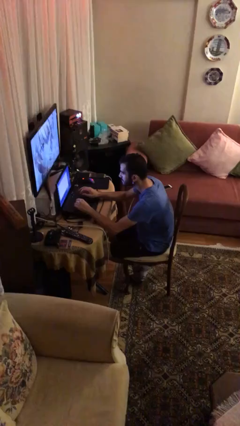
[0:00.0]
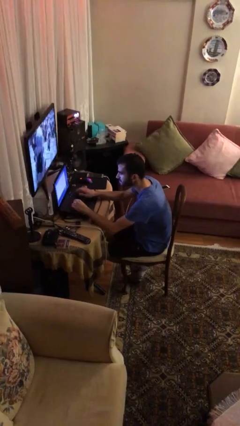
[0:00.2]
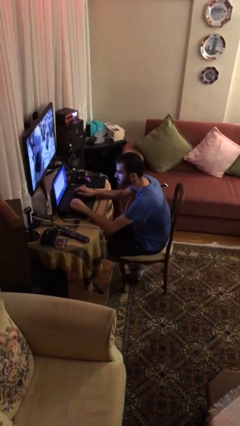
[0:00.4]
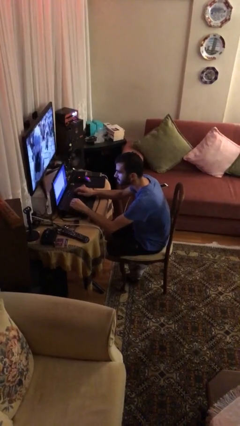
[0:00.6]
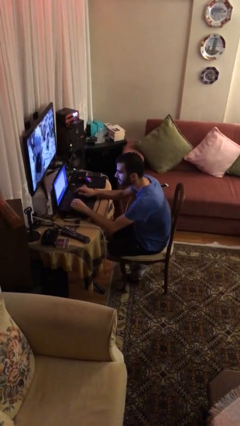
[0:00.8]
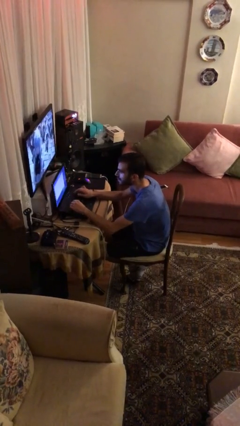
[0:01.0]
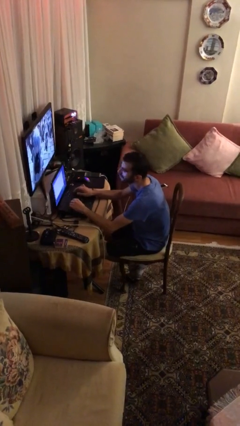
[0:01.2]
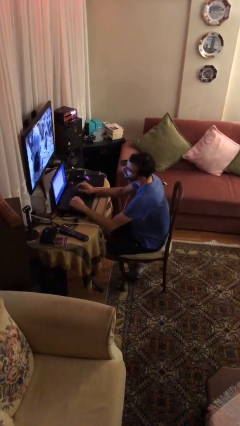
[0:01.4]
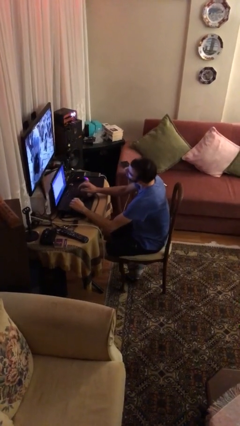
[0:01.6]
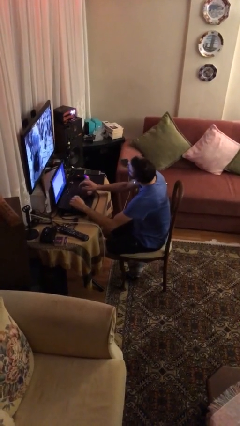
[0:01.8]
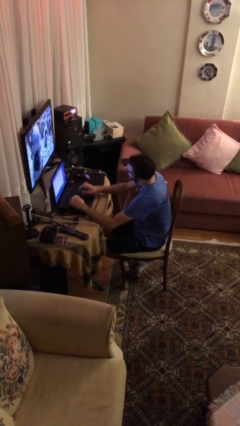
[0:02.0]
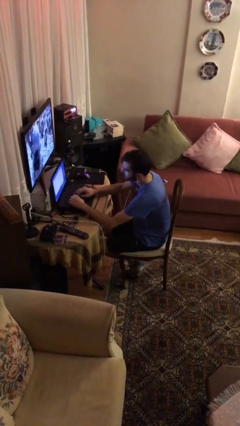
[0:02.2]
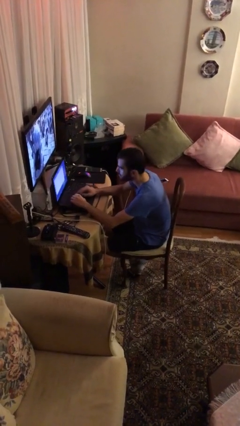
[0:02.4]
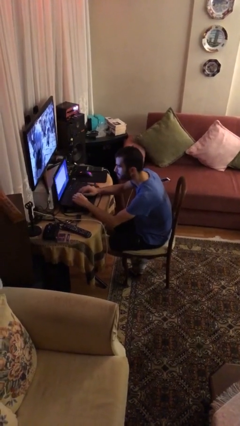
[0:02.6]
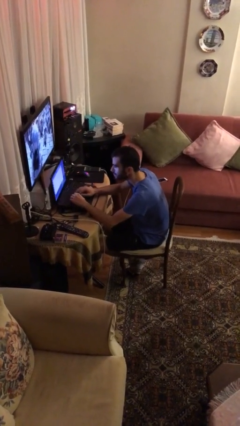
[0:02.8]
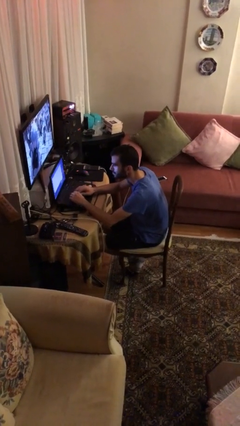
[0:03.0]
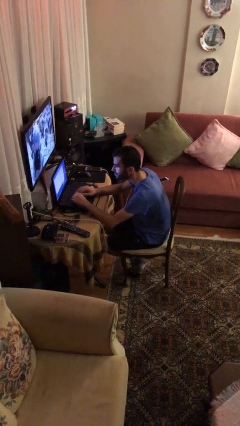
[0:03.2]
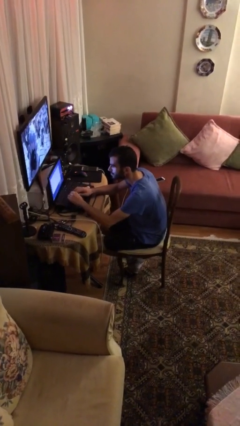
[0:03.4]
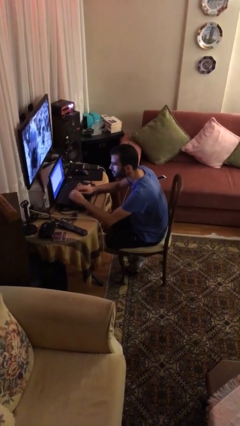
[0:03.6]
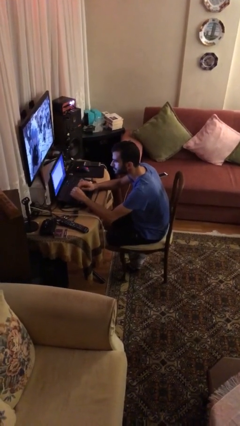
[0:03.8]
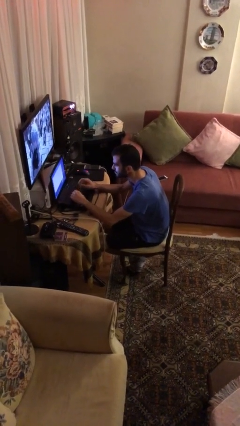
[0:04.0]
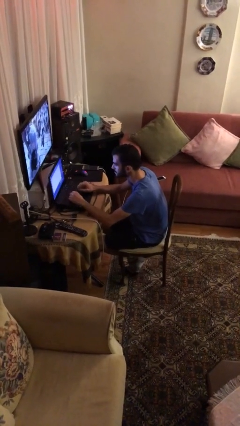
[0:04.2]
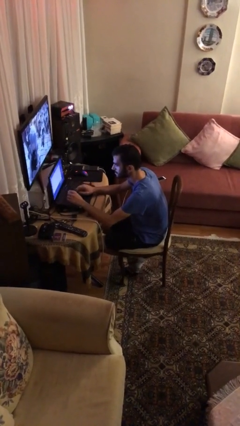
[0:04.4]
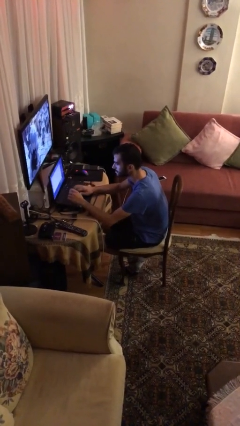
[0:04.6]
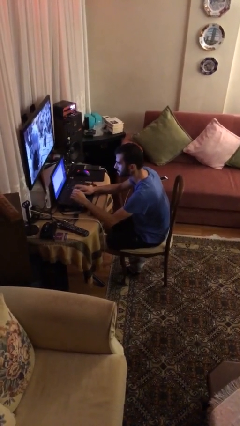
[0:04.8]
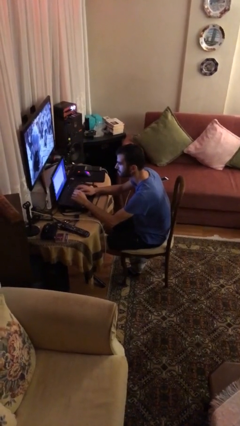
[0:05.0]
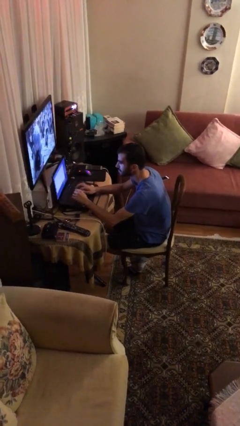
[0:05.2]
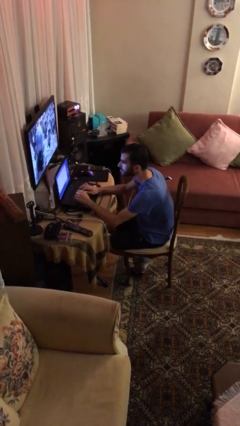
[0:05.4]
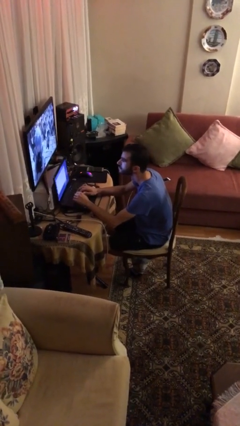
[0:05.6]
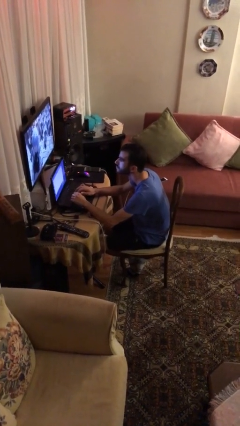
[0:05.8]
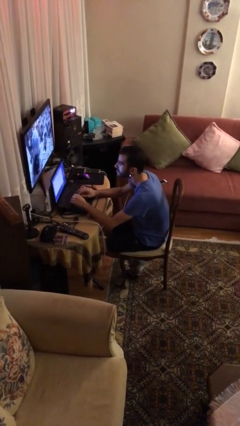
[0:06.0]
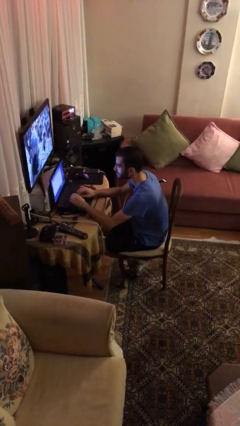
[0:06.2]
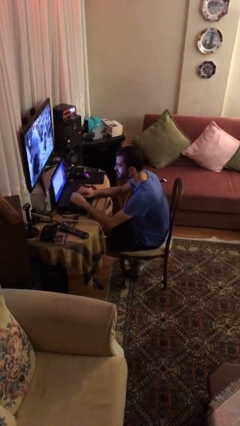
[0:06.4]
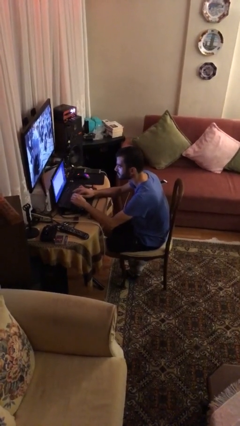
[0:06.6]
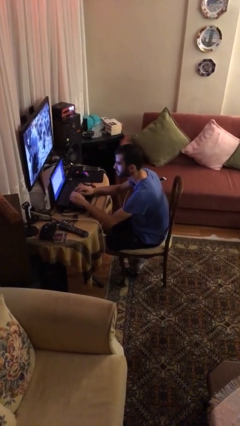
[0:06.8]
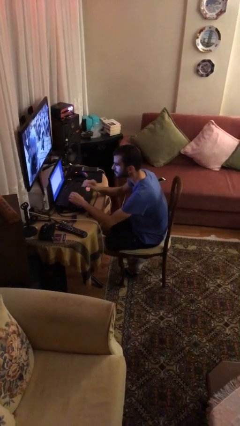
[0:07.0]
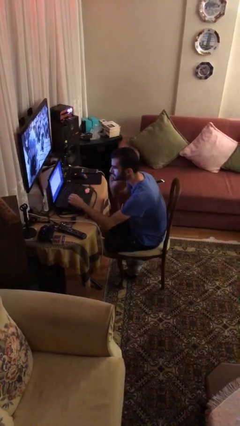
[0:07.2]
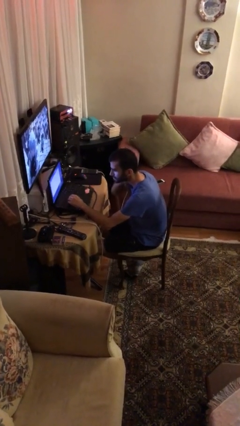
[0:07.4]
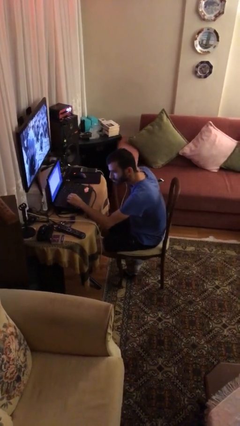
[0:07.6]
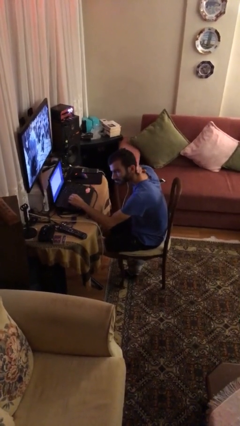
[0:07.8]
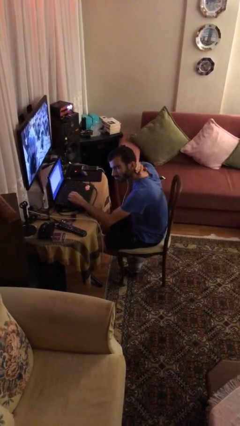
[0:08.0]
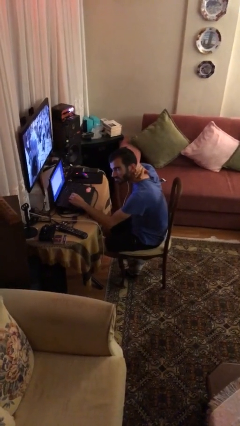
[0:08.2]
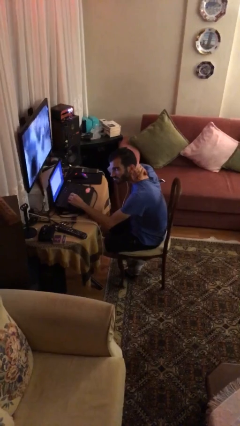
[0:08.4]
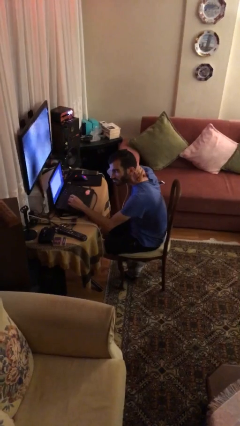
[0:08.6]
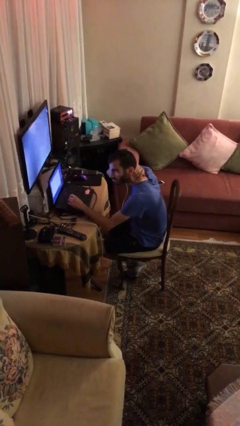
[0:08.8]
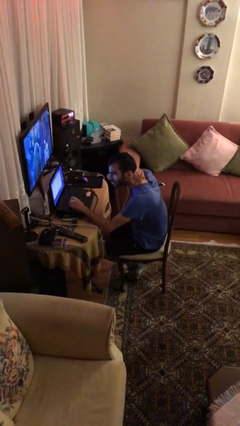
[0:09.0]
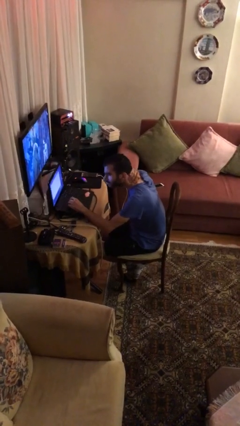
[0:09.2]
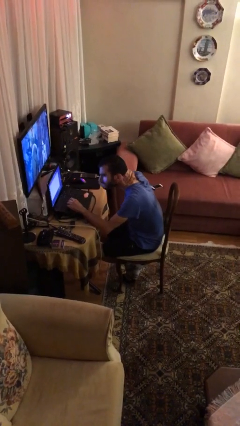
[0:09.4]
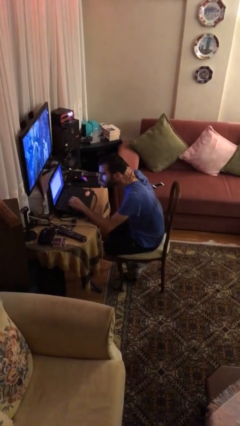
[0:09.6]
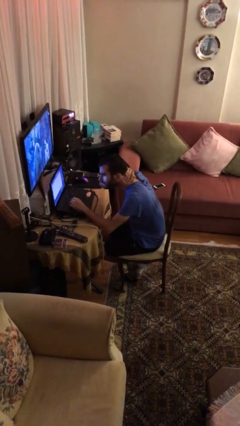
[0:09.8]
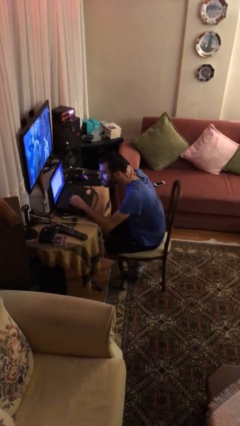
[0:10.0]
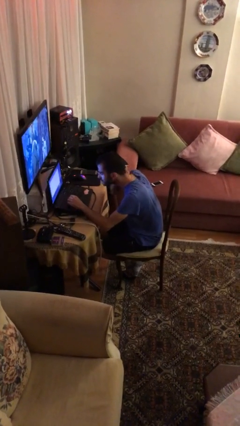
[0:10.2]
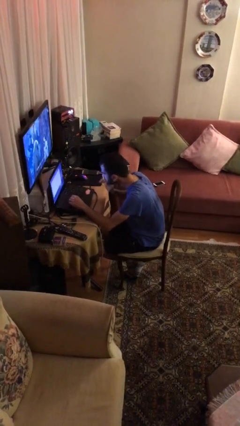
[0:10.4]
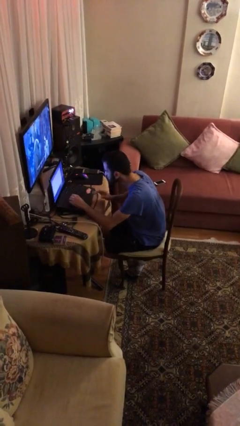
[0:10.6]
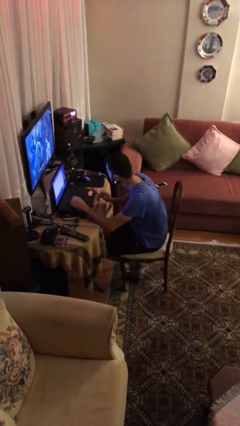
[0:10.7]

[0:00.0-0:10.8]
person interacts with laptop

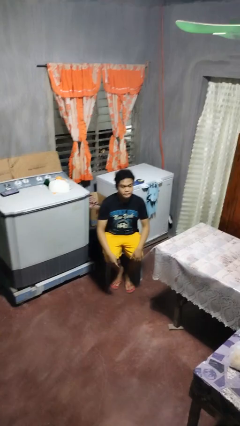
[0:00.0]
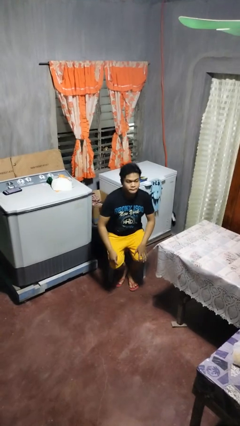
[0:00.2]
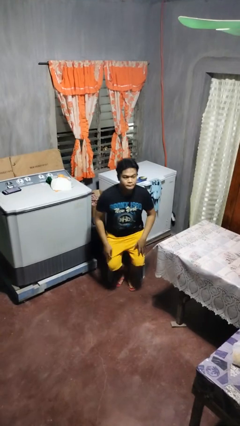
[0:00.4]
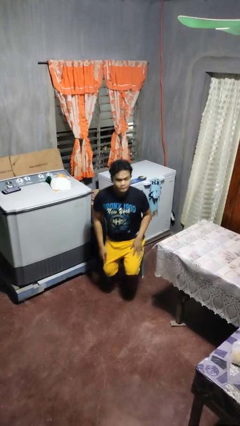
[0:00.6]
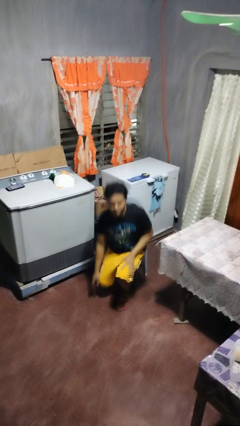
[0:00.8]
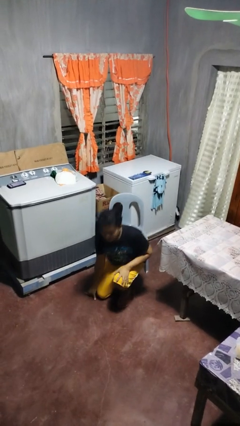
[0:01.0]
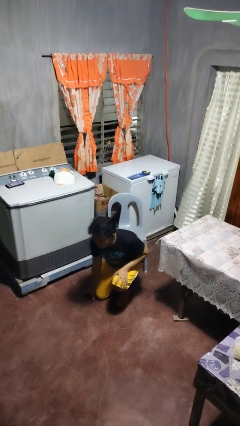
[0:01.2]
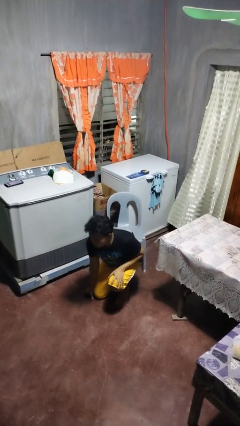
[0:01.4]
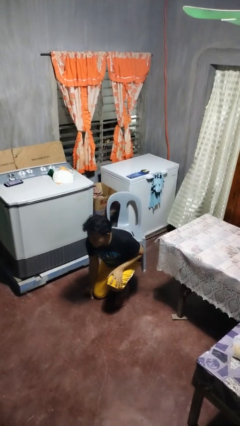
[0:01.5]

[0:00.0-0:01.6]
person falls from chair

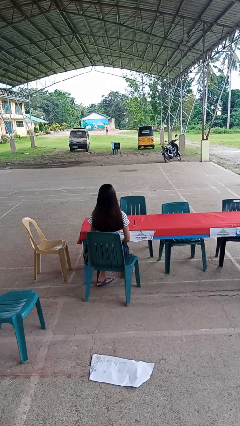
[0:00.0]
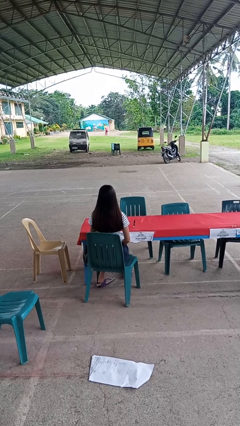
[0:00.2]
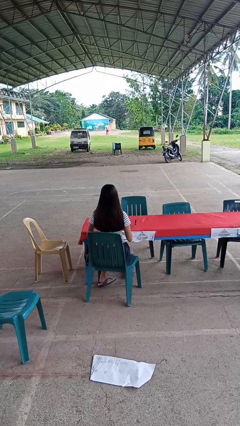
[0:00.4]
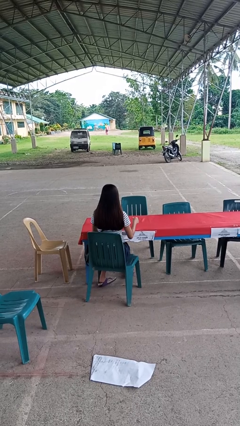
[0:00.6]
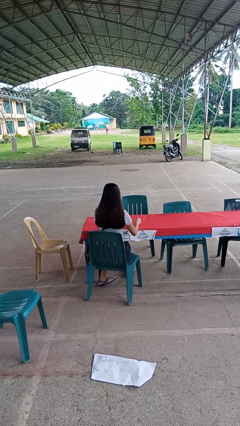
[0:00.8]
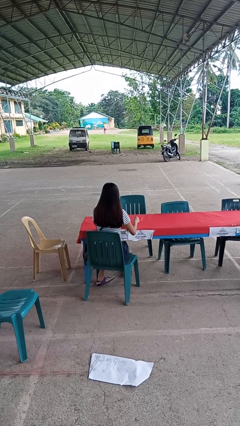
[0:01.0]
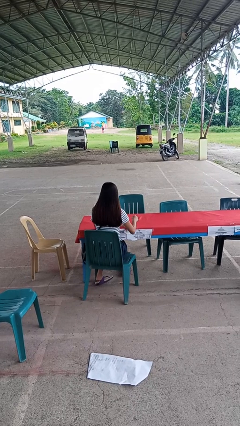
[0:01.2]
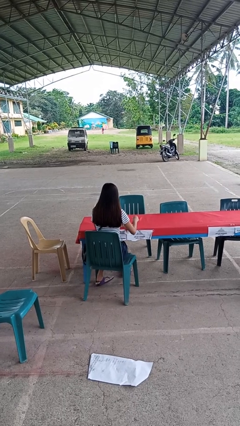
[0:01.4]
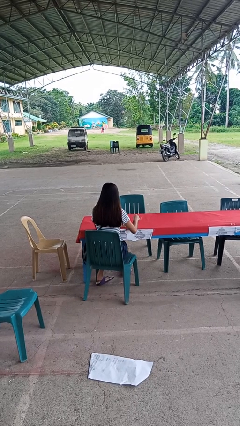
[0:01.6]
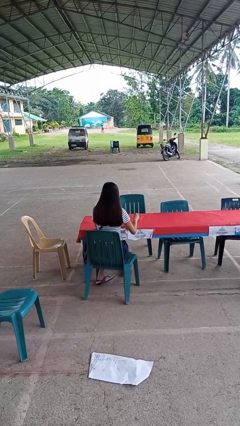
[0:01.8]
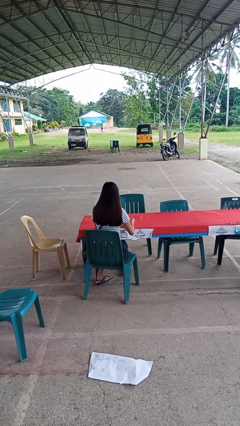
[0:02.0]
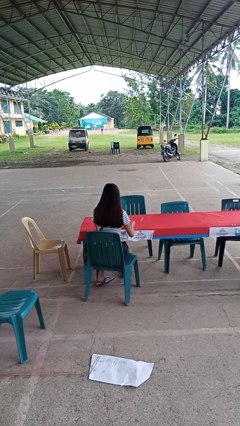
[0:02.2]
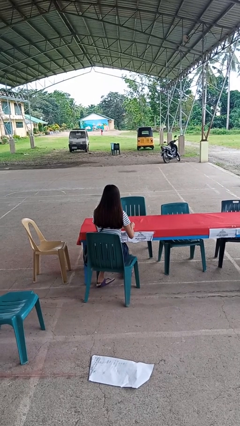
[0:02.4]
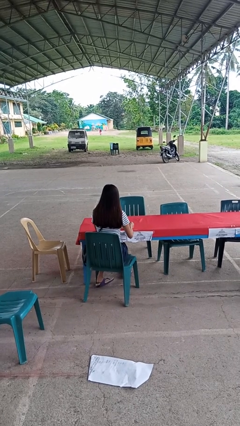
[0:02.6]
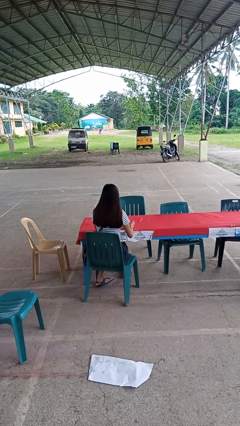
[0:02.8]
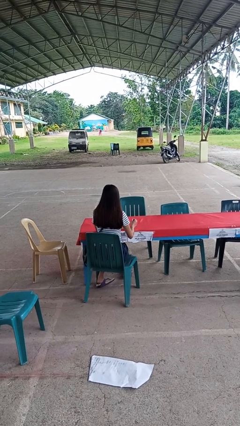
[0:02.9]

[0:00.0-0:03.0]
person paints fingernails

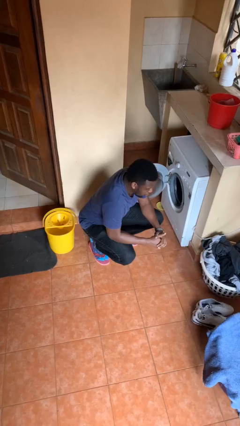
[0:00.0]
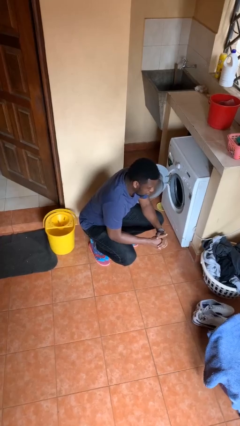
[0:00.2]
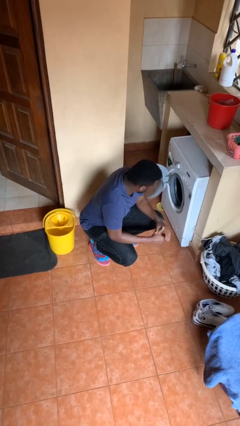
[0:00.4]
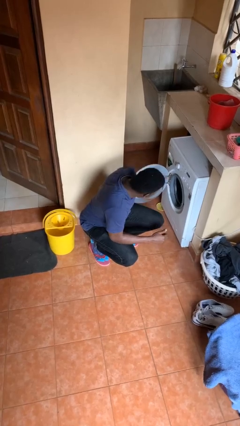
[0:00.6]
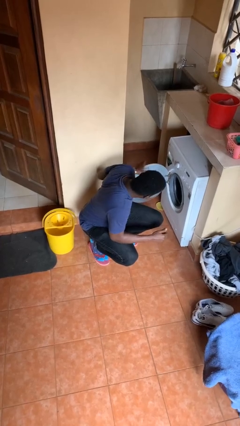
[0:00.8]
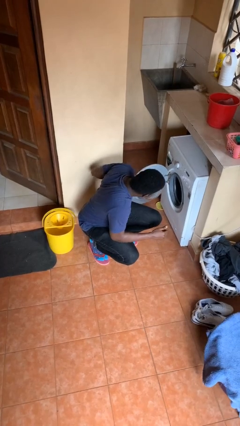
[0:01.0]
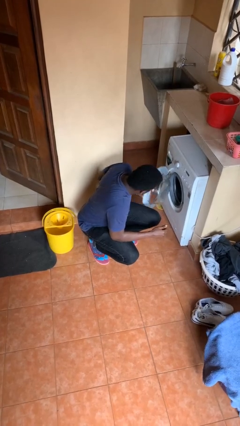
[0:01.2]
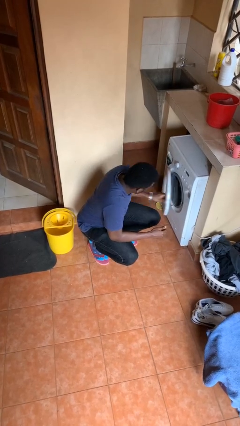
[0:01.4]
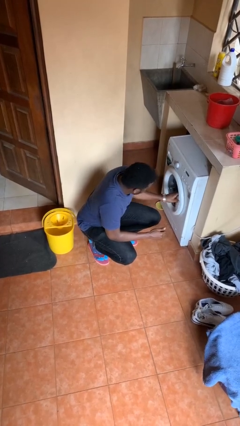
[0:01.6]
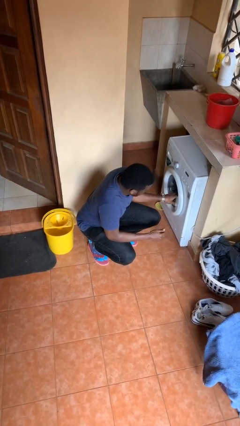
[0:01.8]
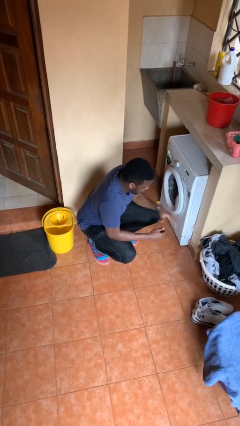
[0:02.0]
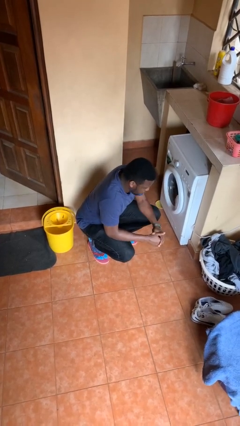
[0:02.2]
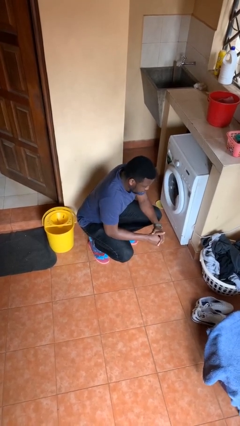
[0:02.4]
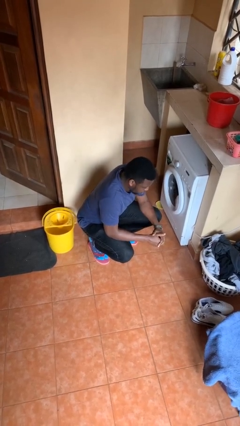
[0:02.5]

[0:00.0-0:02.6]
person closes clothes washer
